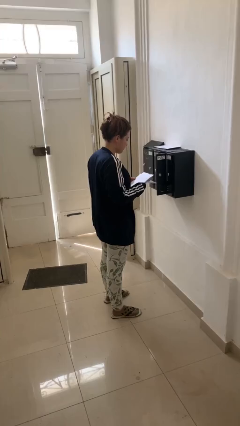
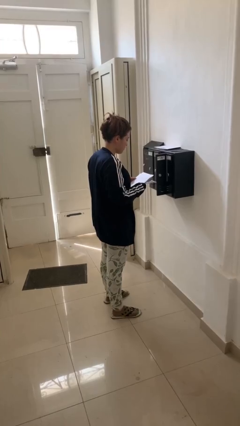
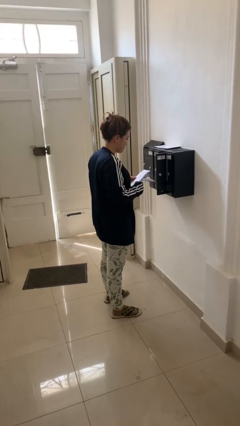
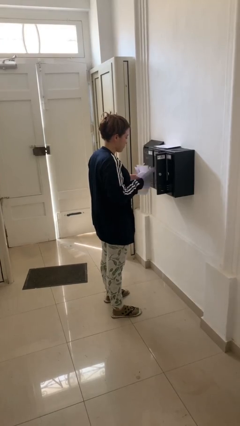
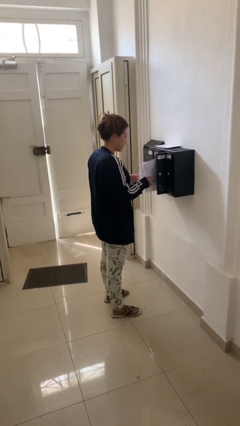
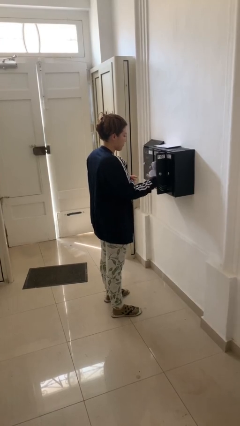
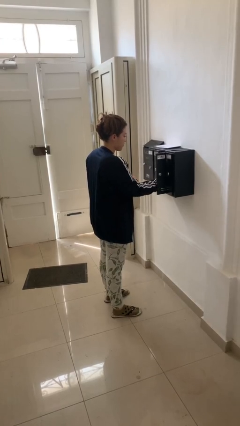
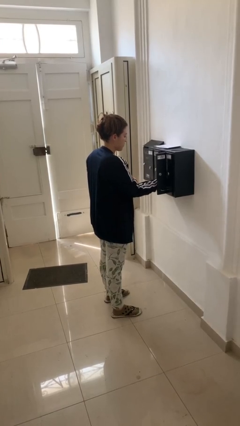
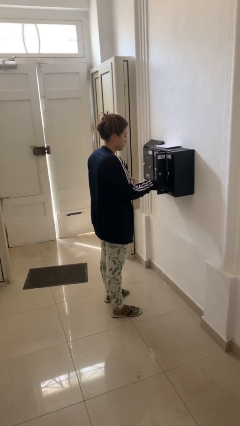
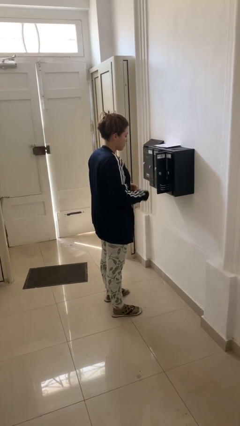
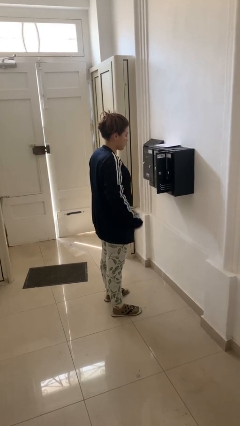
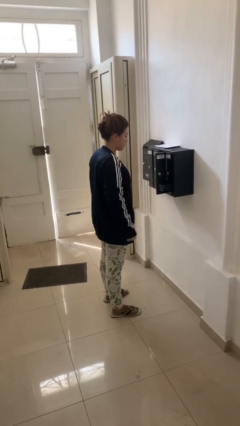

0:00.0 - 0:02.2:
person puts letters in mailbox

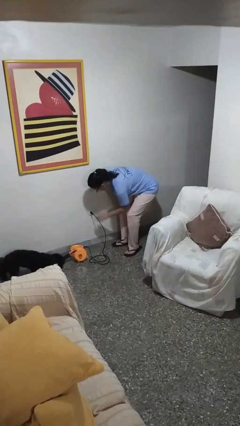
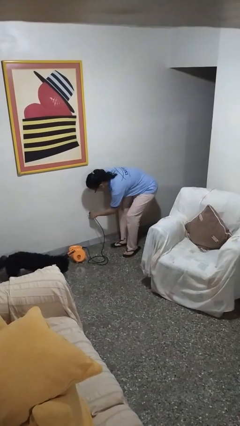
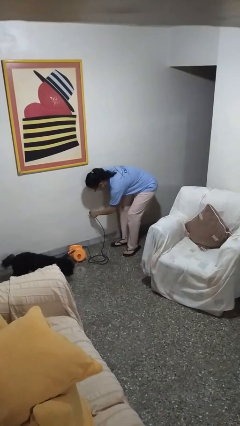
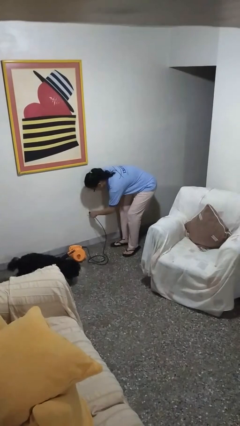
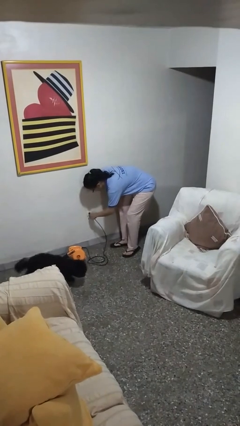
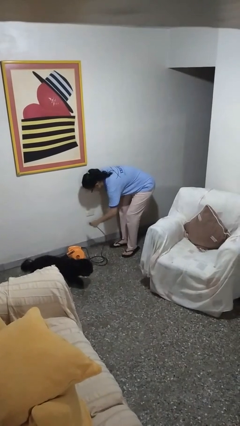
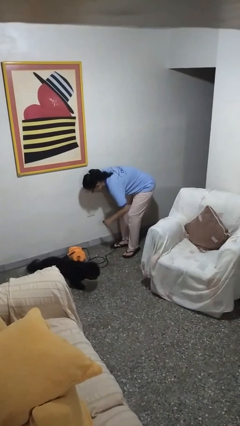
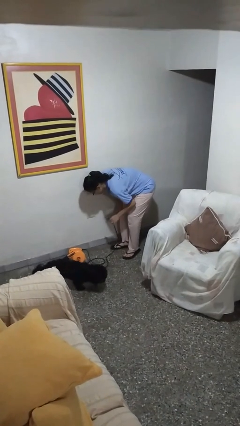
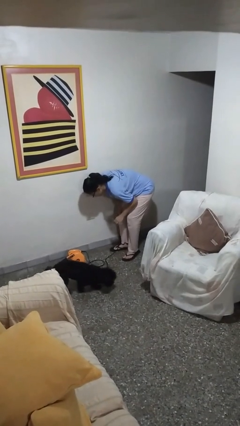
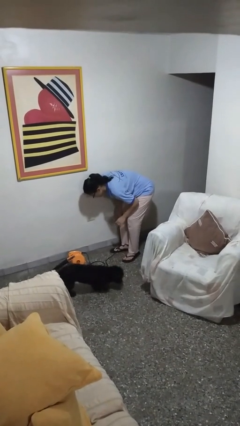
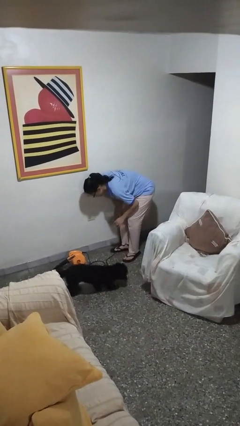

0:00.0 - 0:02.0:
person unplugs from electrical socket

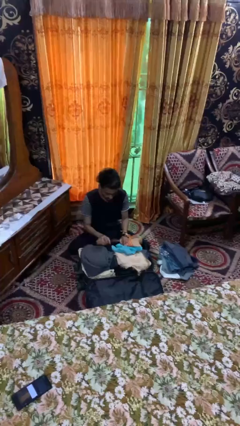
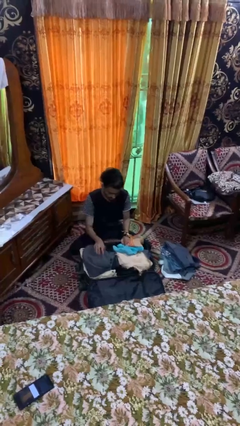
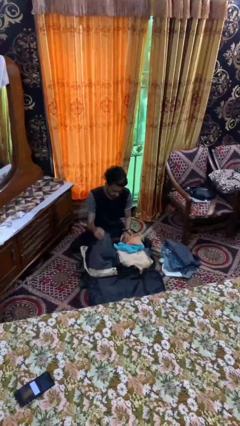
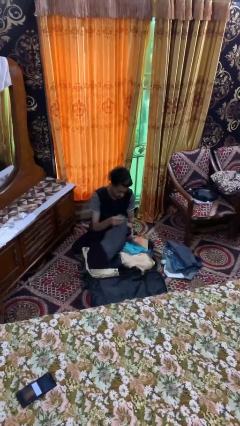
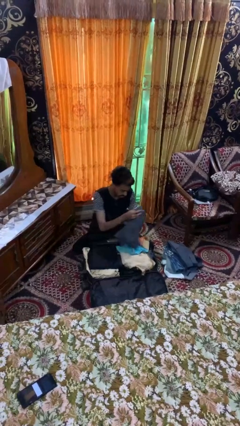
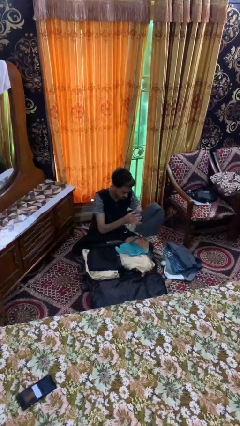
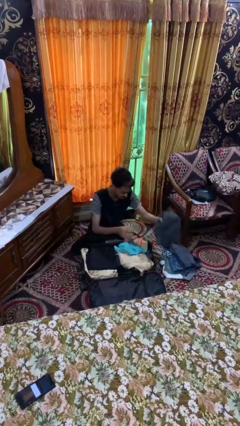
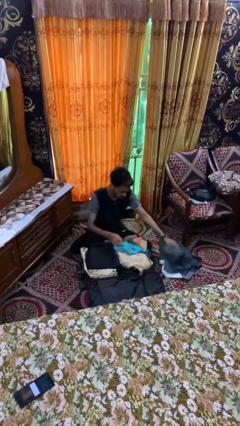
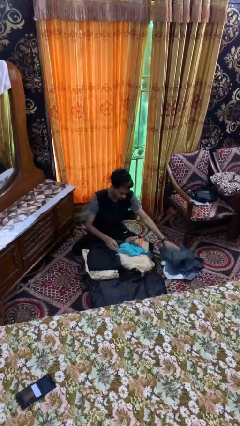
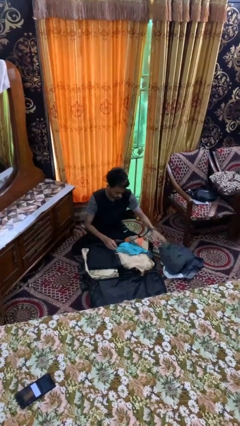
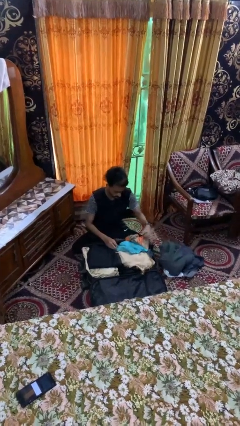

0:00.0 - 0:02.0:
person unloads clothes from suitcase

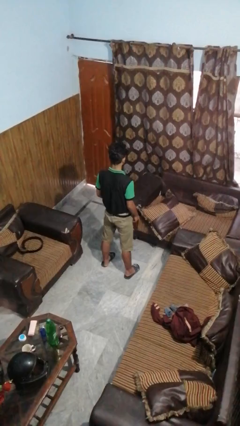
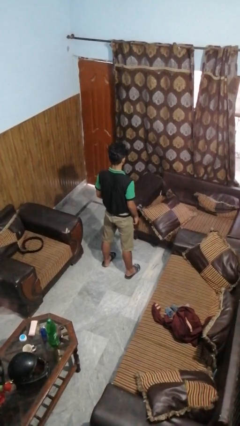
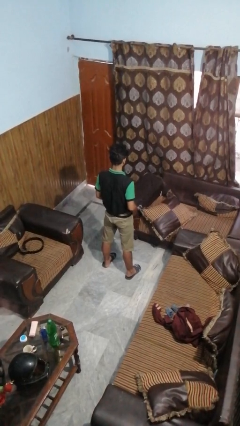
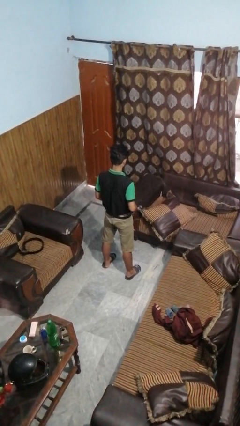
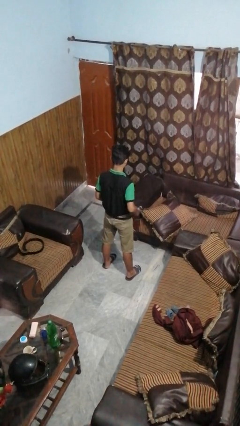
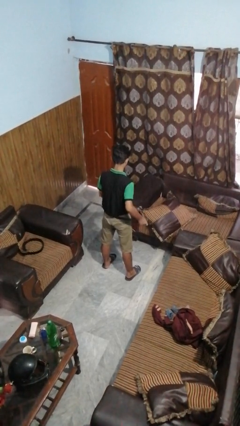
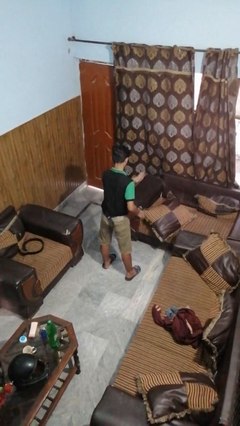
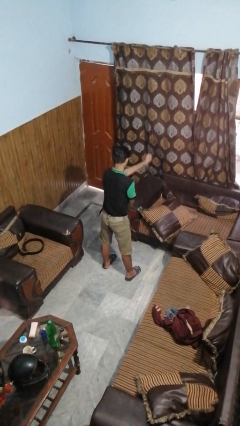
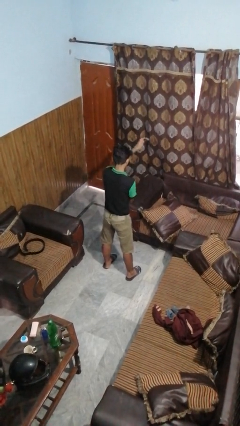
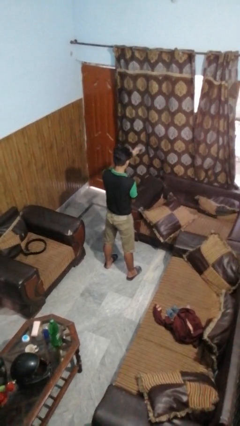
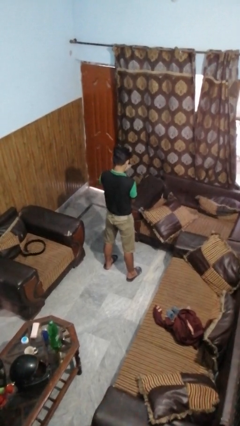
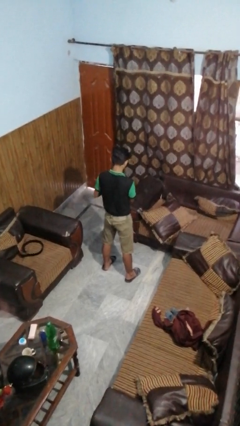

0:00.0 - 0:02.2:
person takes off belt

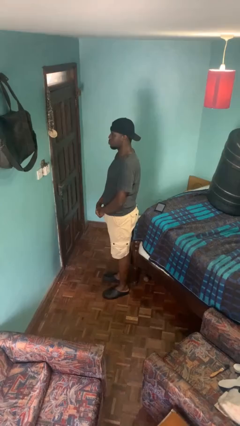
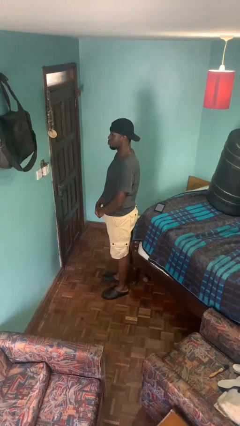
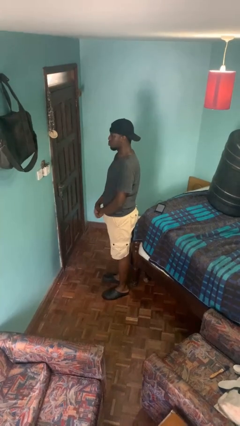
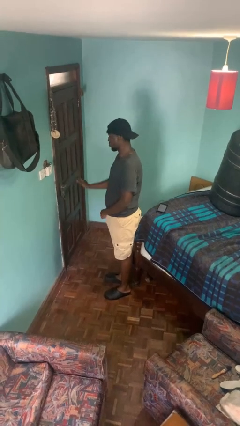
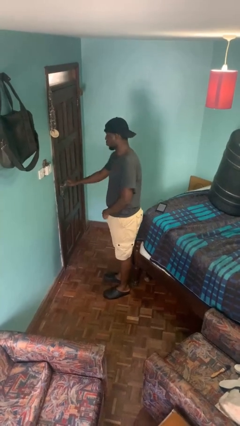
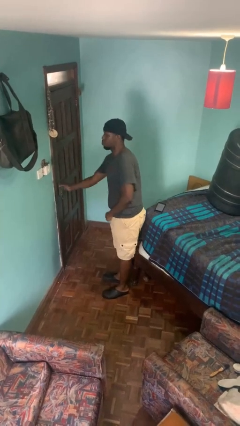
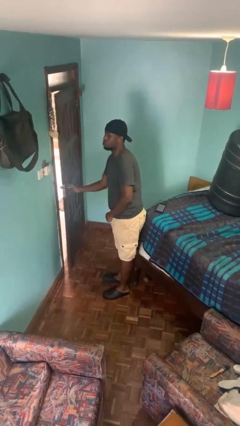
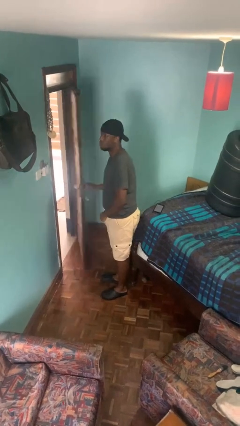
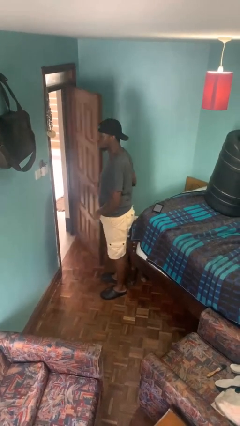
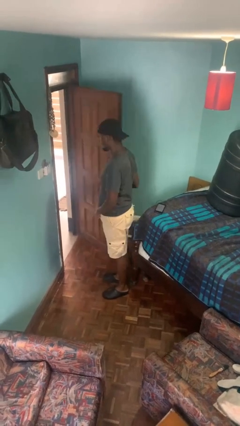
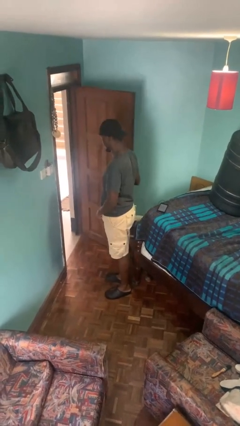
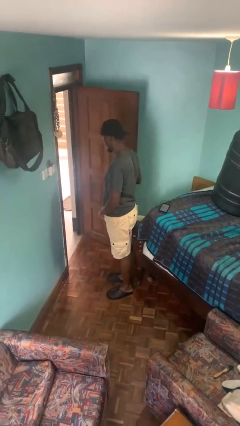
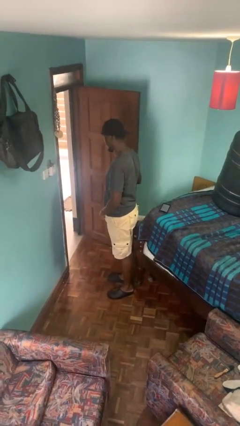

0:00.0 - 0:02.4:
person opens facility door

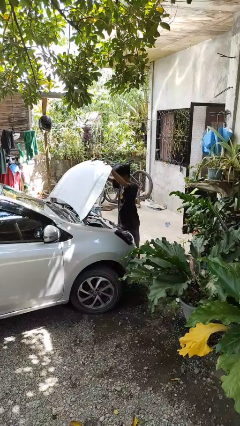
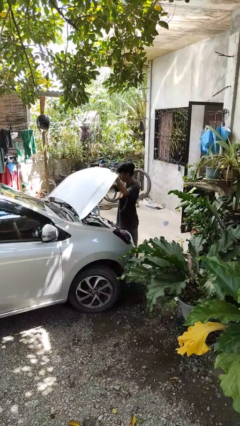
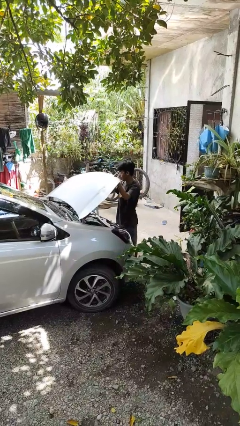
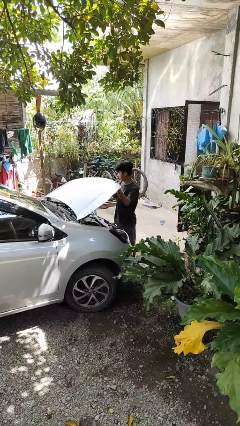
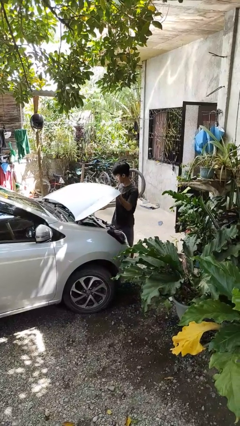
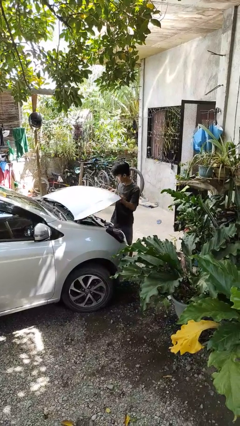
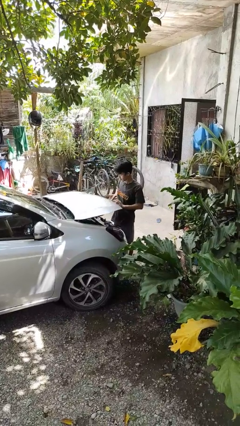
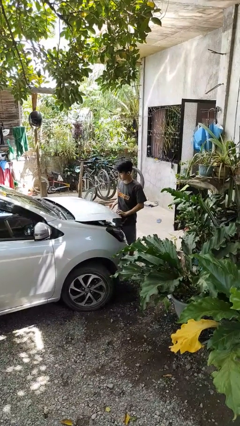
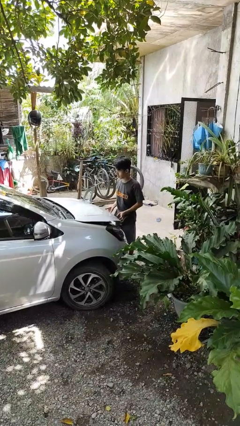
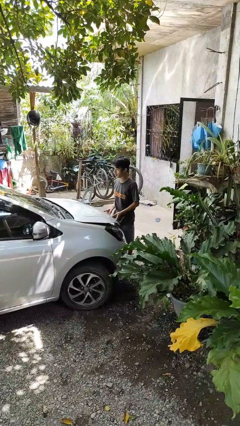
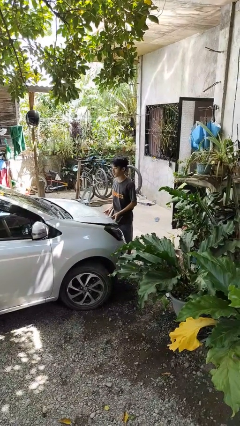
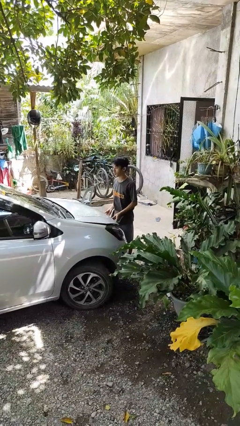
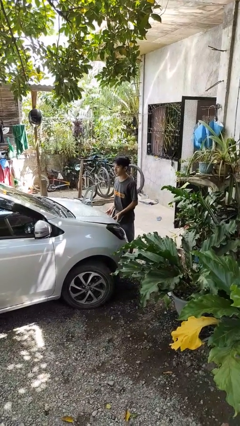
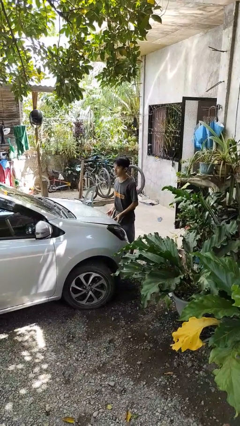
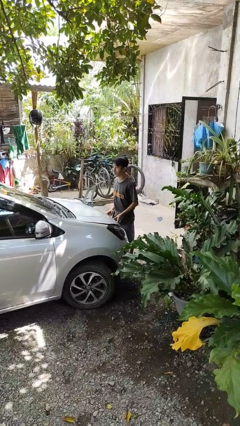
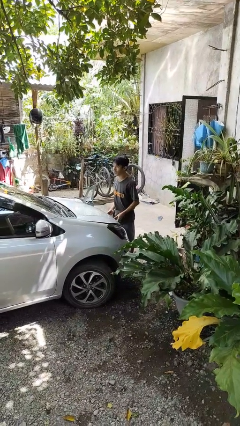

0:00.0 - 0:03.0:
person closes car hood

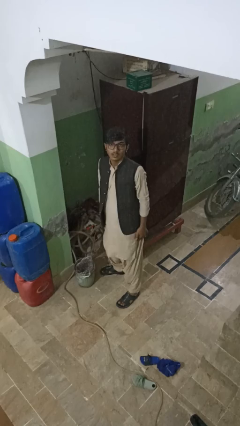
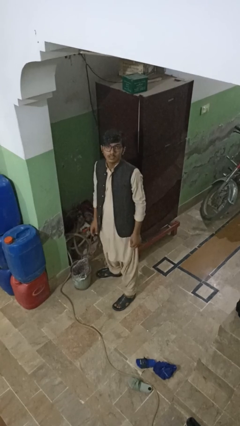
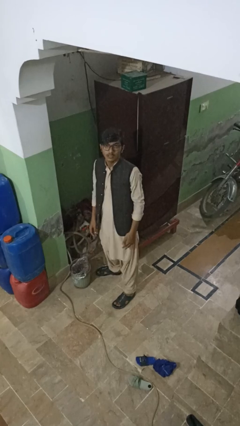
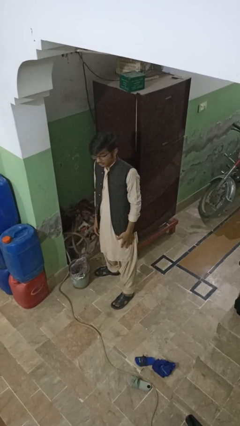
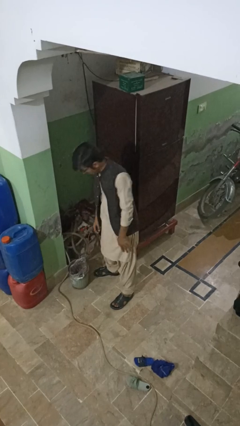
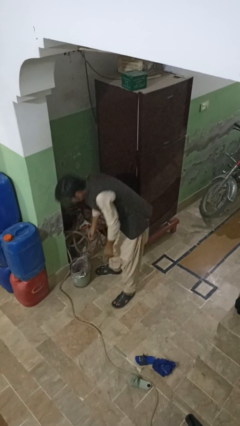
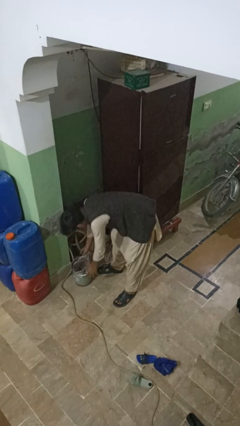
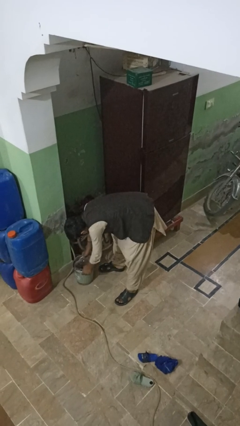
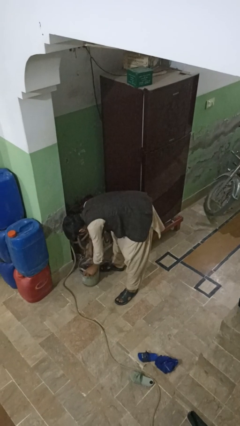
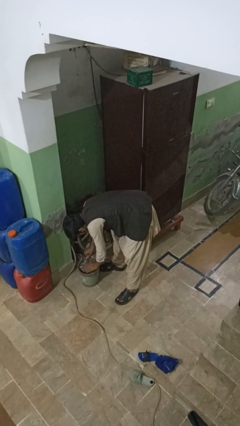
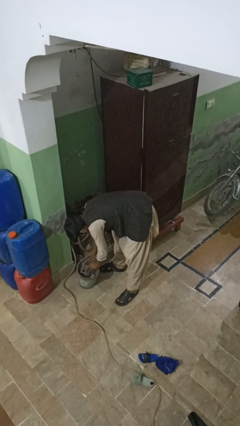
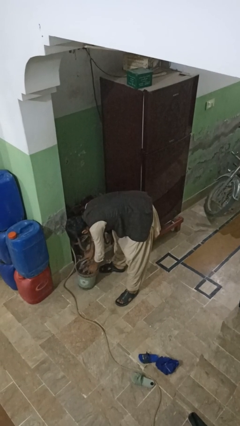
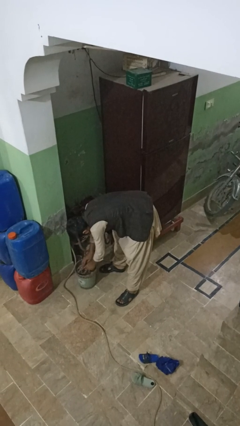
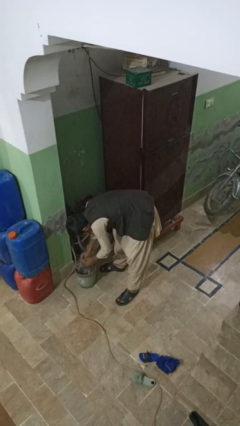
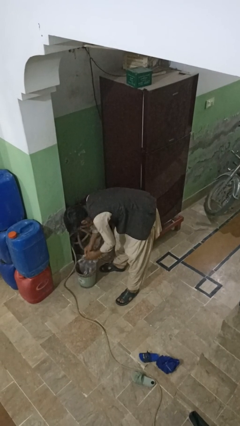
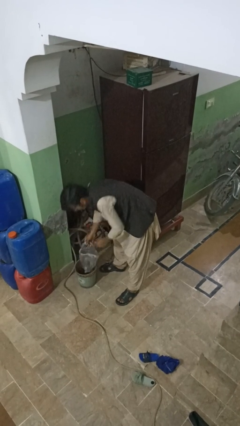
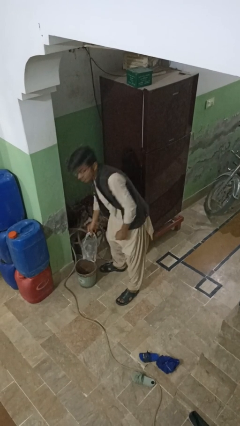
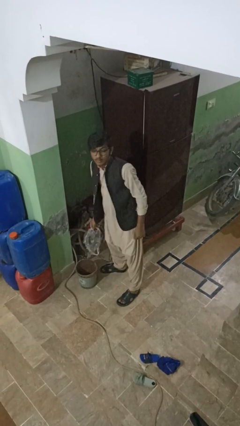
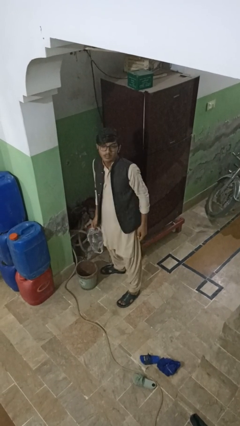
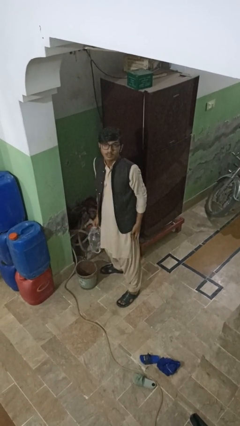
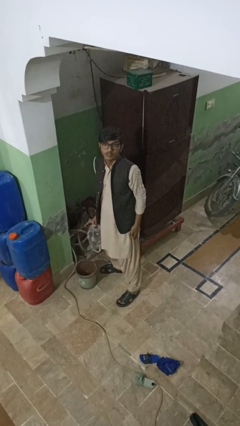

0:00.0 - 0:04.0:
person removes trashbag from trashcan
